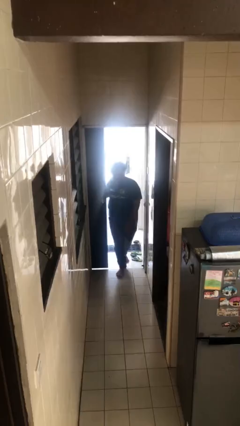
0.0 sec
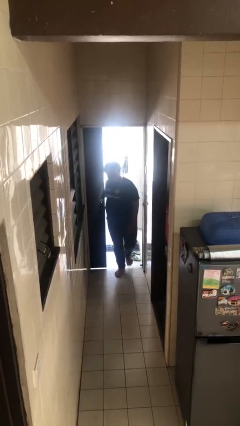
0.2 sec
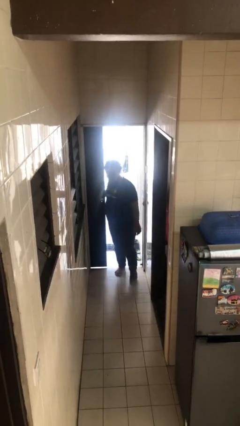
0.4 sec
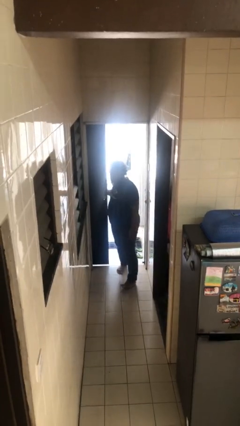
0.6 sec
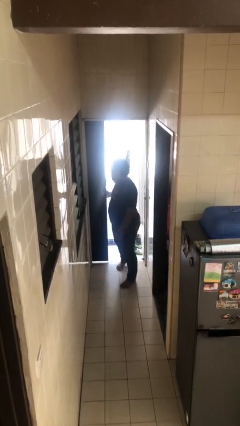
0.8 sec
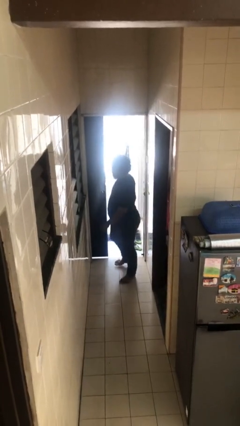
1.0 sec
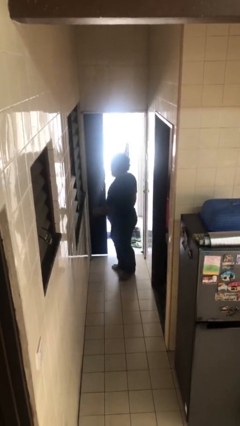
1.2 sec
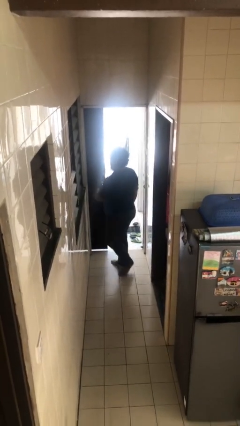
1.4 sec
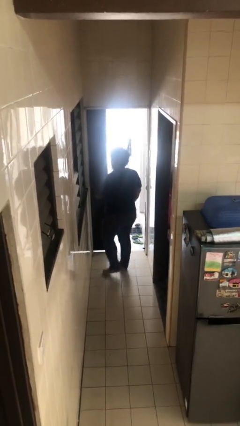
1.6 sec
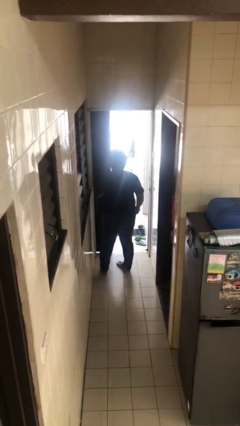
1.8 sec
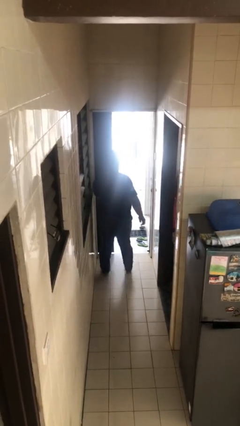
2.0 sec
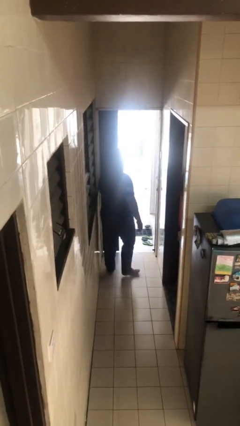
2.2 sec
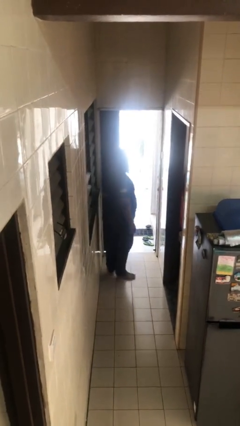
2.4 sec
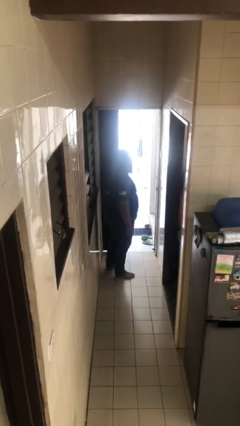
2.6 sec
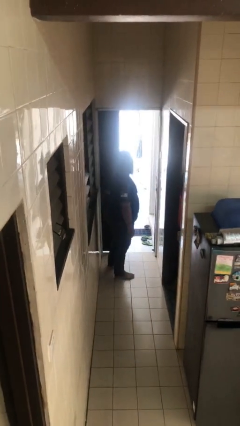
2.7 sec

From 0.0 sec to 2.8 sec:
person enters scene through structure

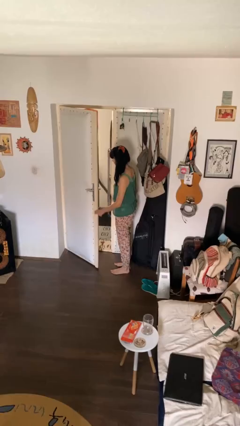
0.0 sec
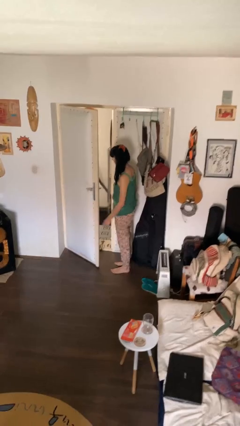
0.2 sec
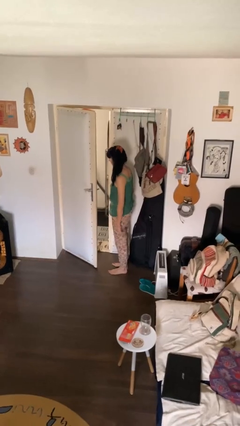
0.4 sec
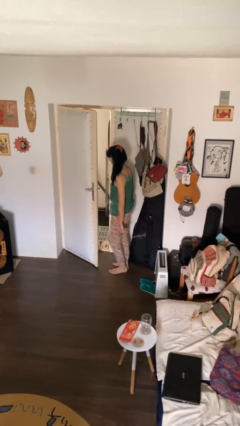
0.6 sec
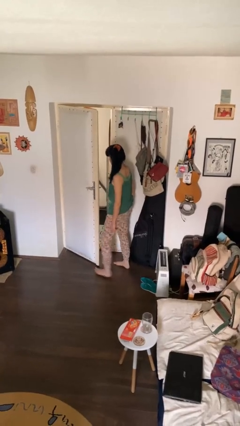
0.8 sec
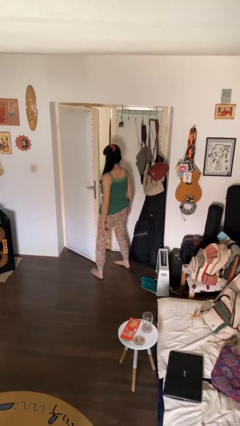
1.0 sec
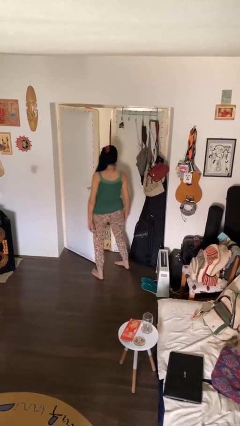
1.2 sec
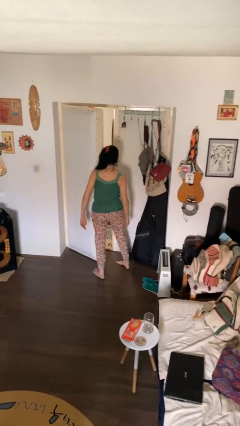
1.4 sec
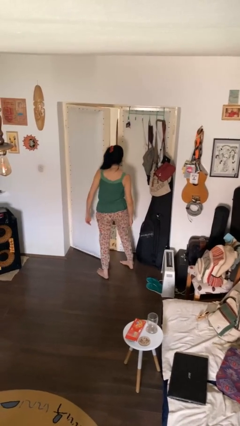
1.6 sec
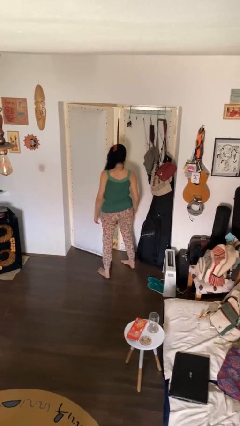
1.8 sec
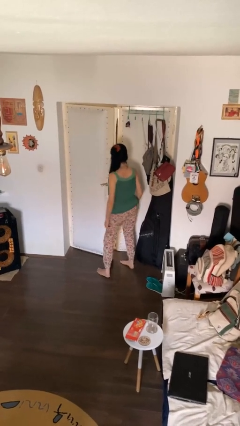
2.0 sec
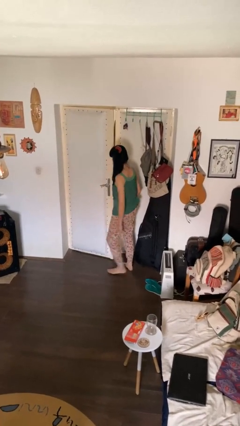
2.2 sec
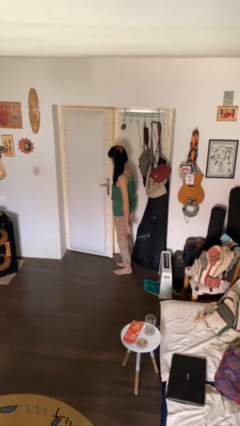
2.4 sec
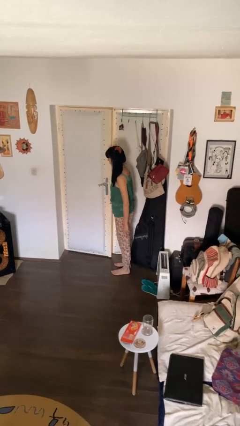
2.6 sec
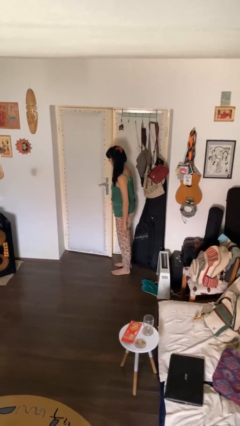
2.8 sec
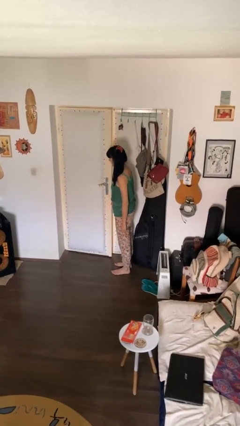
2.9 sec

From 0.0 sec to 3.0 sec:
person closes door with hip

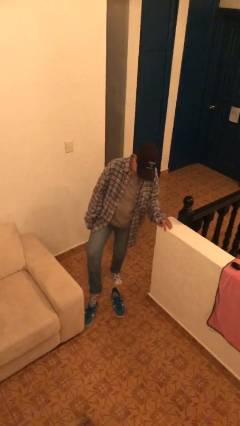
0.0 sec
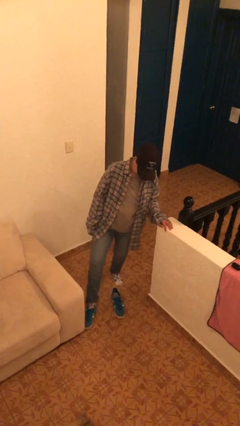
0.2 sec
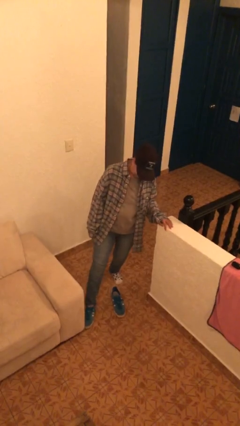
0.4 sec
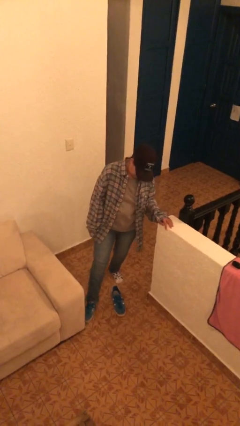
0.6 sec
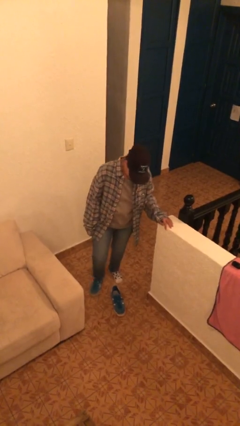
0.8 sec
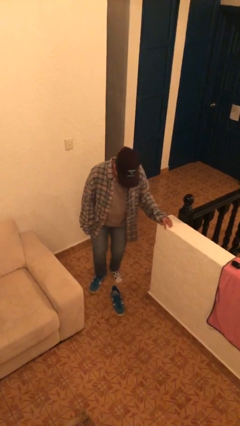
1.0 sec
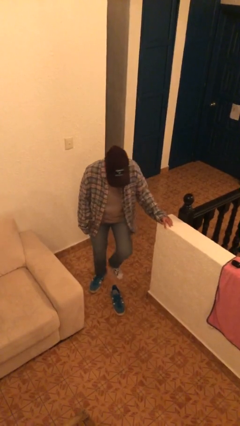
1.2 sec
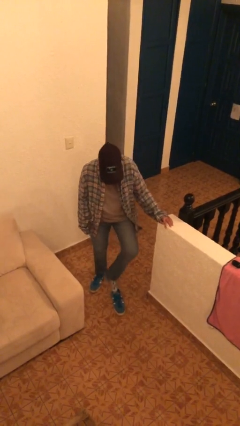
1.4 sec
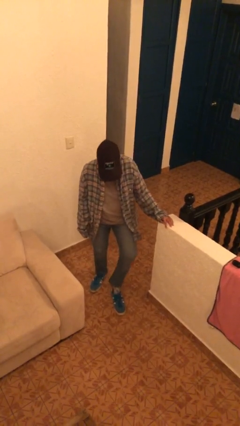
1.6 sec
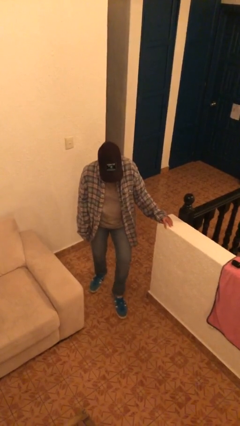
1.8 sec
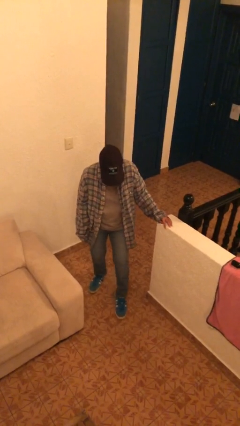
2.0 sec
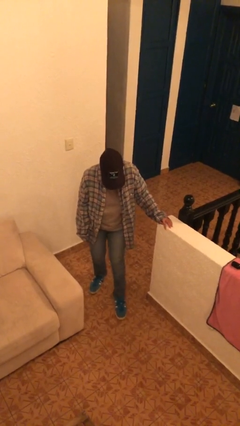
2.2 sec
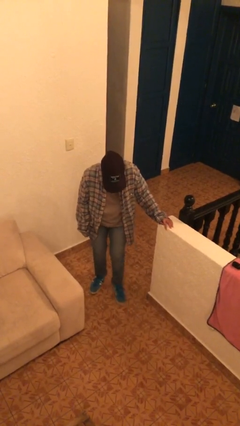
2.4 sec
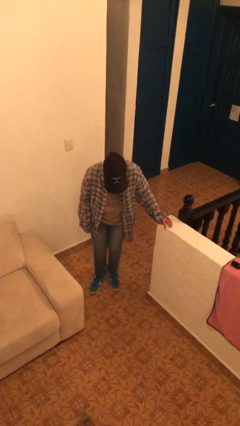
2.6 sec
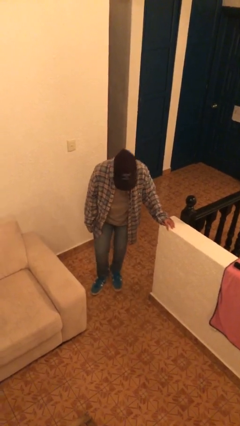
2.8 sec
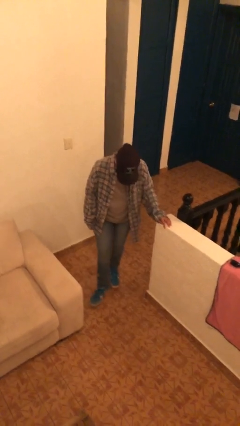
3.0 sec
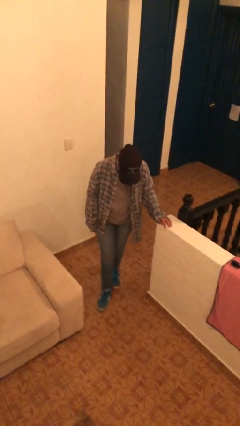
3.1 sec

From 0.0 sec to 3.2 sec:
person puts on shoes

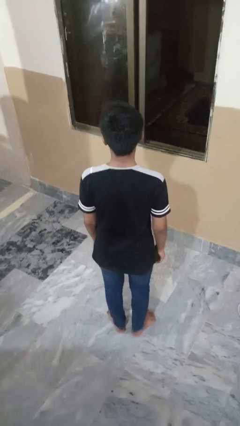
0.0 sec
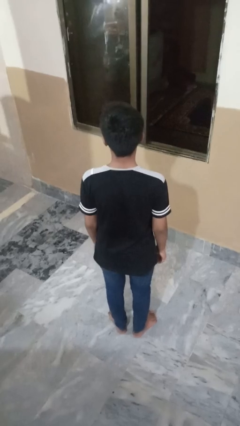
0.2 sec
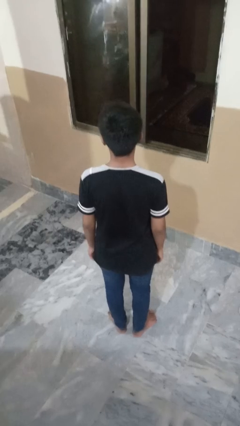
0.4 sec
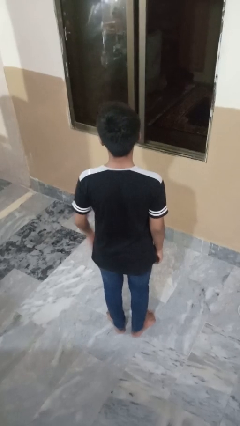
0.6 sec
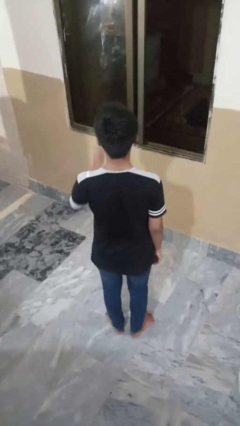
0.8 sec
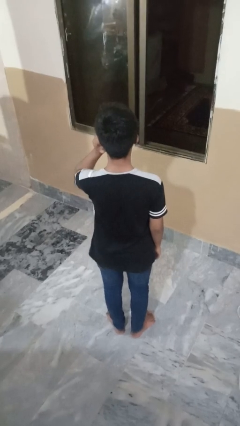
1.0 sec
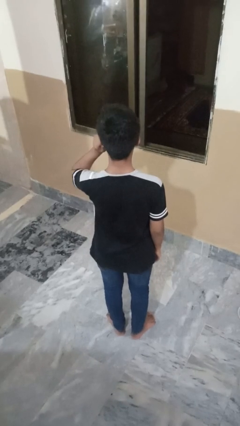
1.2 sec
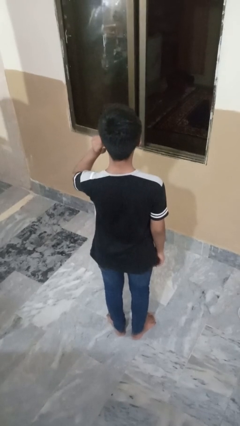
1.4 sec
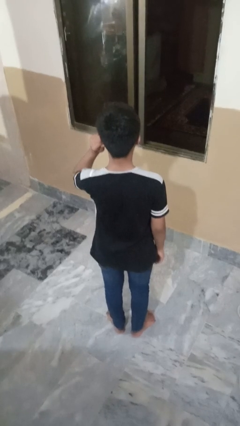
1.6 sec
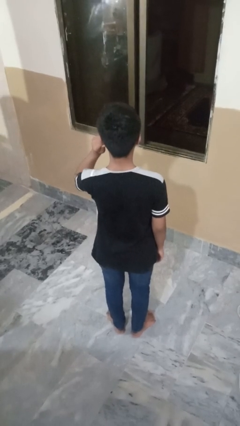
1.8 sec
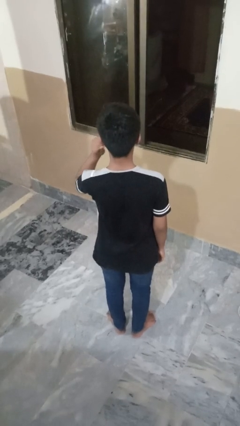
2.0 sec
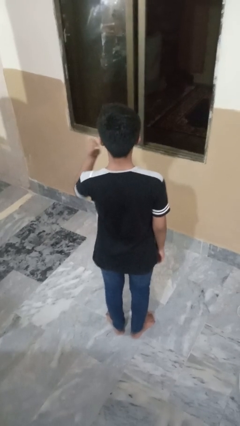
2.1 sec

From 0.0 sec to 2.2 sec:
person touches earlobe

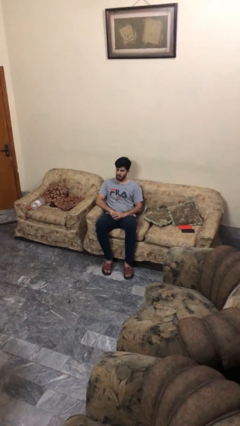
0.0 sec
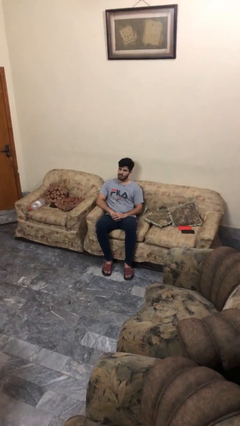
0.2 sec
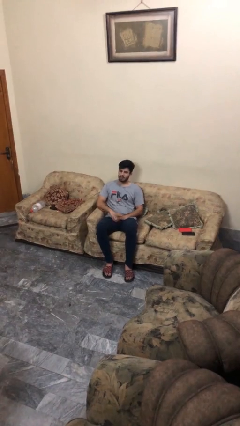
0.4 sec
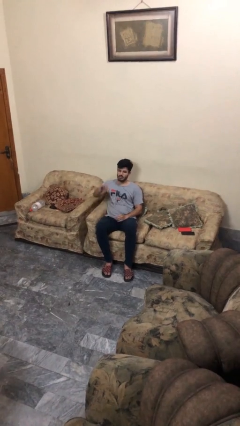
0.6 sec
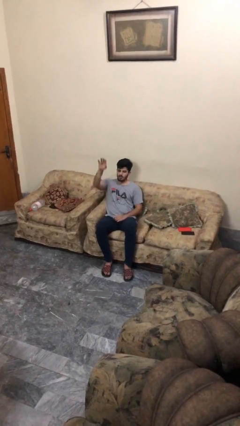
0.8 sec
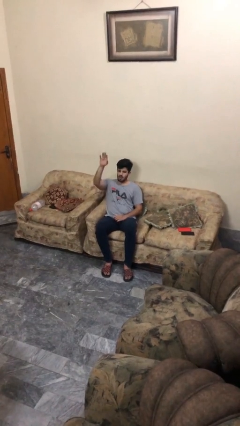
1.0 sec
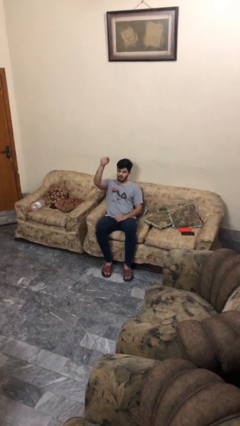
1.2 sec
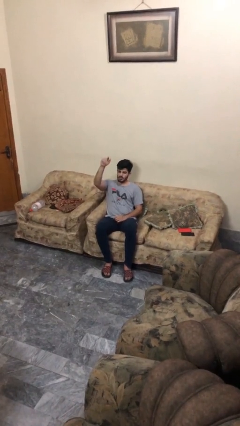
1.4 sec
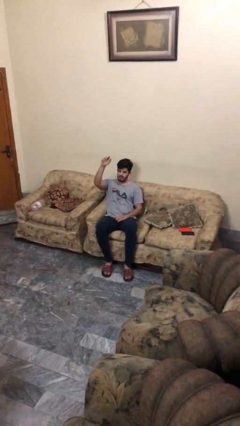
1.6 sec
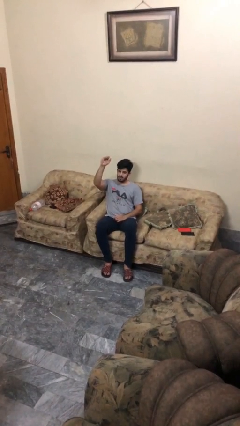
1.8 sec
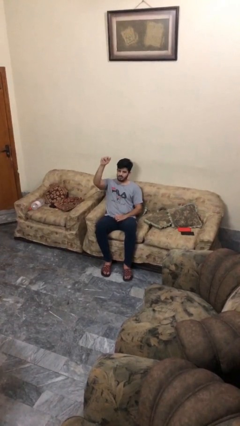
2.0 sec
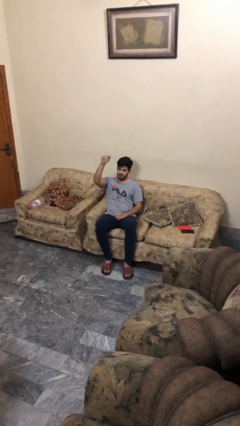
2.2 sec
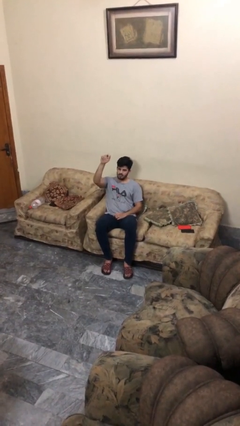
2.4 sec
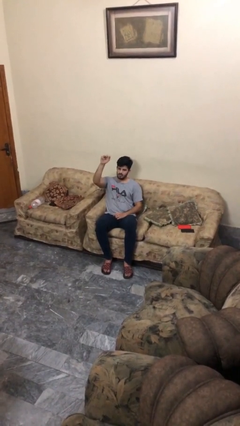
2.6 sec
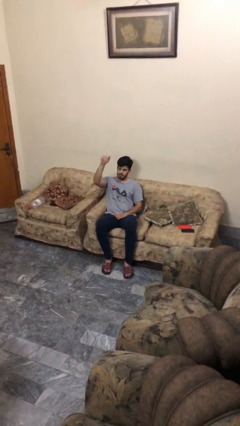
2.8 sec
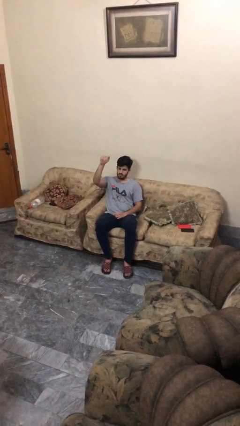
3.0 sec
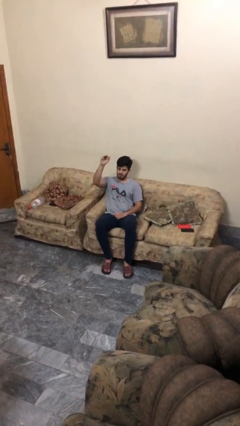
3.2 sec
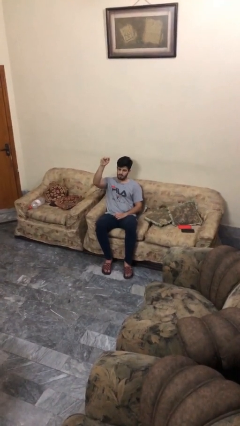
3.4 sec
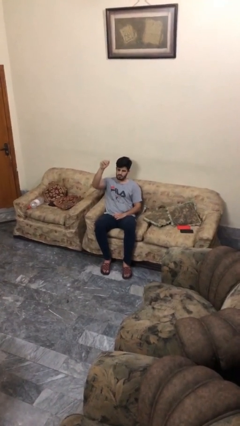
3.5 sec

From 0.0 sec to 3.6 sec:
person gestures come here

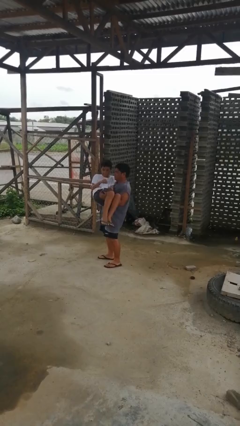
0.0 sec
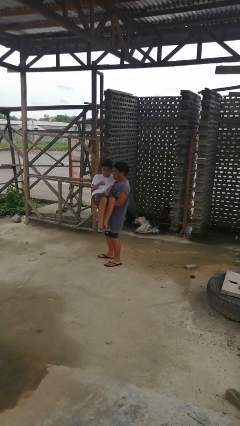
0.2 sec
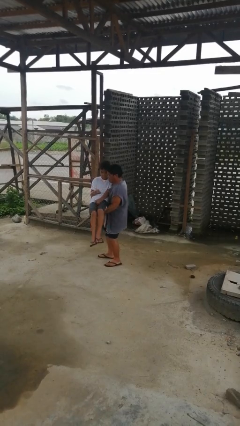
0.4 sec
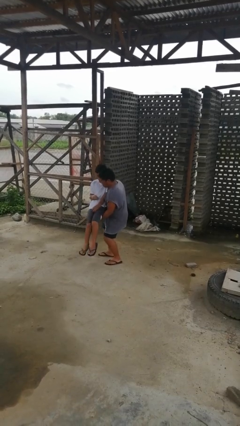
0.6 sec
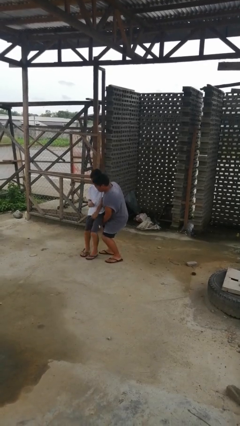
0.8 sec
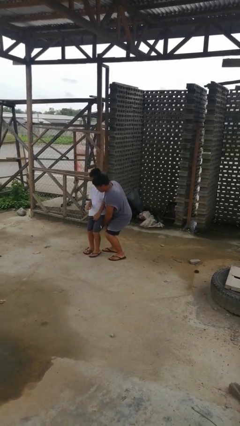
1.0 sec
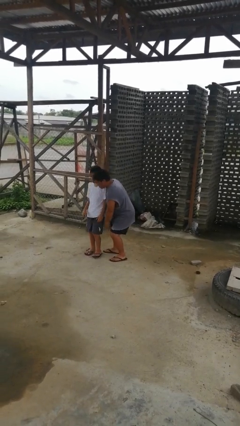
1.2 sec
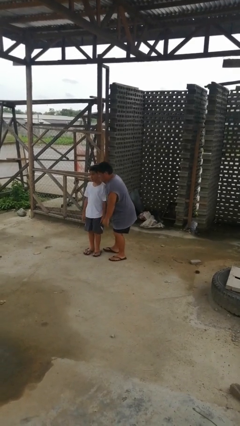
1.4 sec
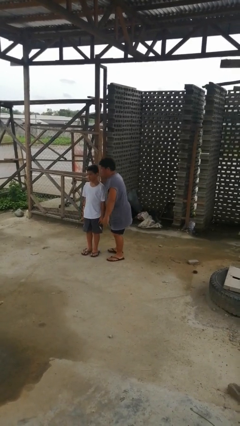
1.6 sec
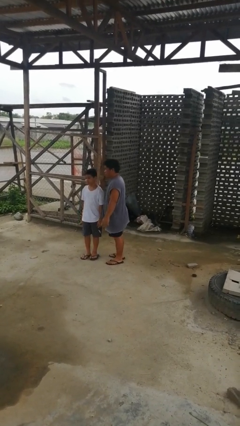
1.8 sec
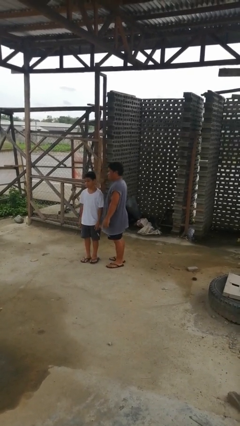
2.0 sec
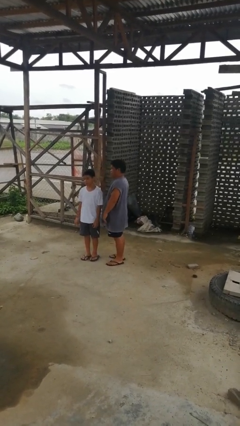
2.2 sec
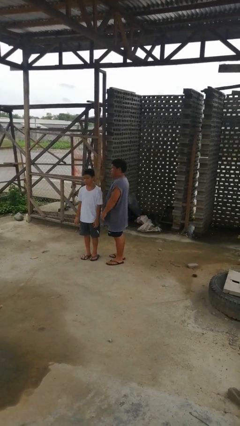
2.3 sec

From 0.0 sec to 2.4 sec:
person puts down person

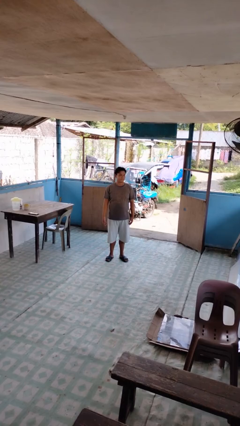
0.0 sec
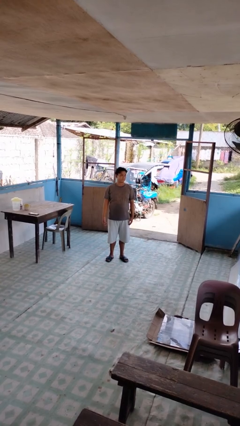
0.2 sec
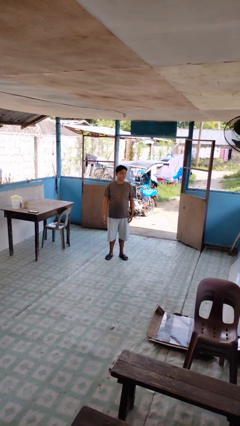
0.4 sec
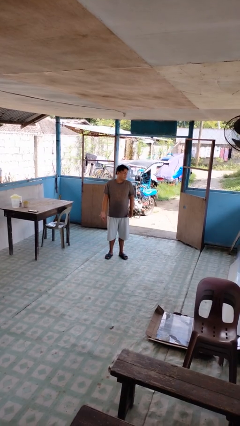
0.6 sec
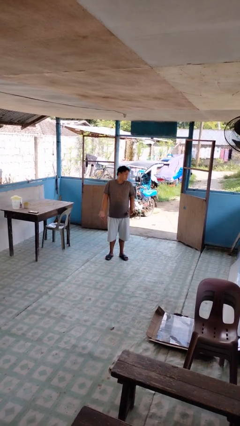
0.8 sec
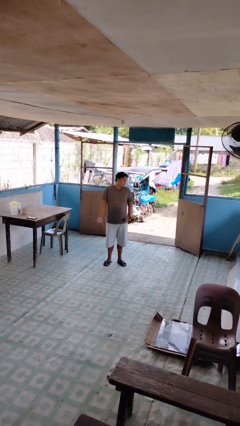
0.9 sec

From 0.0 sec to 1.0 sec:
person shrugs
